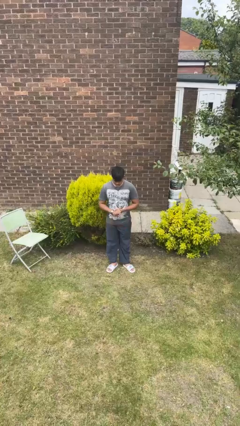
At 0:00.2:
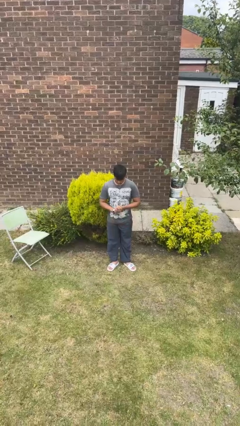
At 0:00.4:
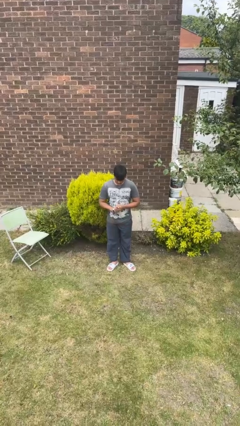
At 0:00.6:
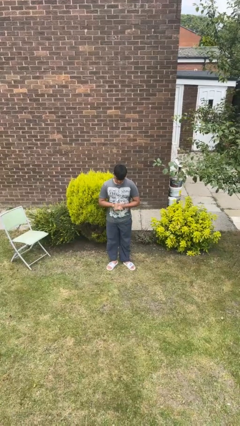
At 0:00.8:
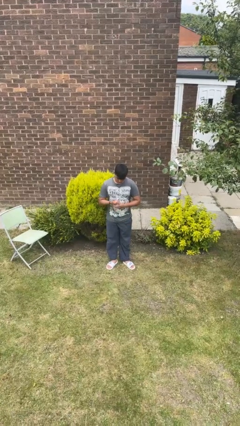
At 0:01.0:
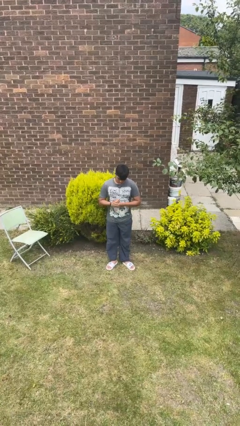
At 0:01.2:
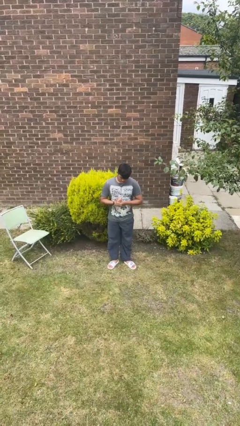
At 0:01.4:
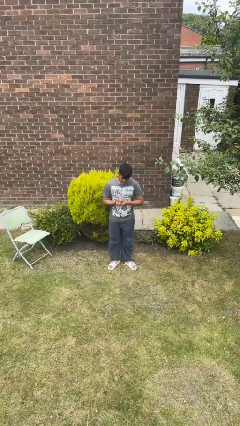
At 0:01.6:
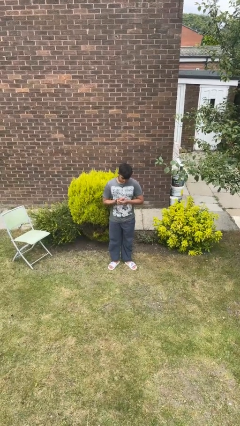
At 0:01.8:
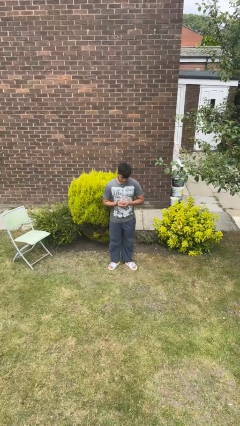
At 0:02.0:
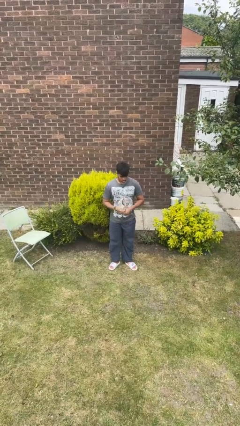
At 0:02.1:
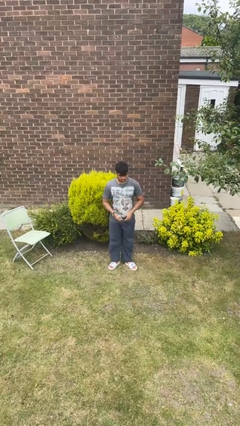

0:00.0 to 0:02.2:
person cracks knuckles

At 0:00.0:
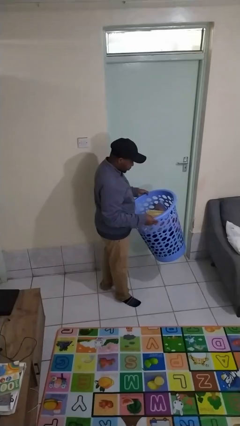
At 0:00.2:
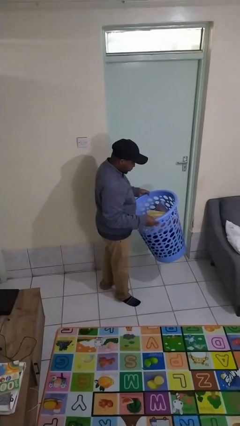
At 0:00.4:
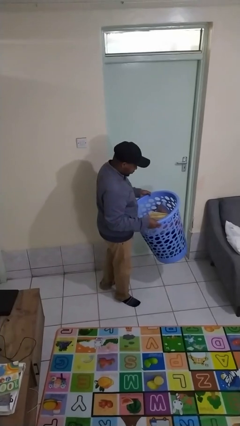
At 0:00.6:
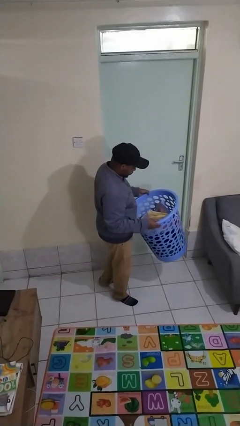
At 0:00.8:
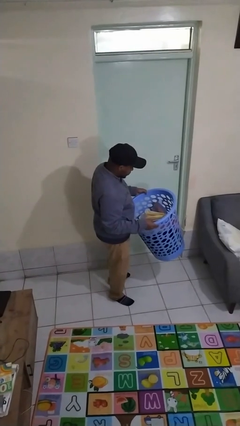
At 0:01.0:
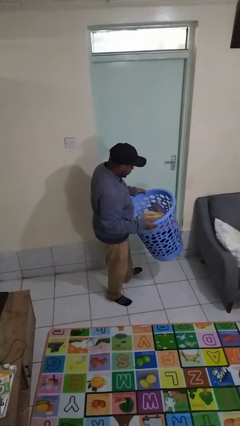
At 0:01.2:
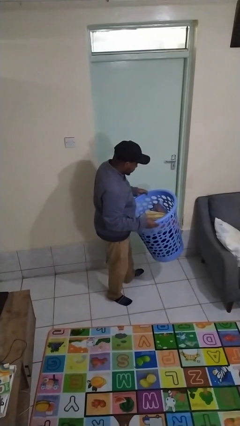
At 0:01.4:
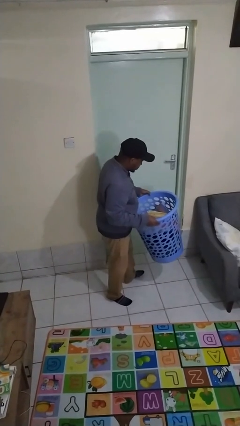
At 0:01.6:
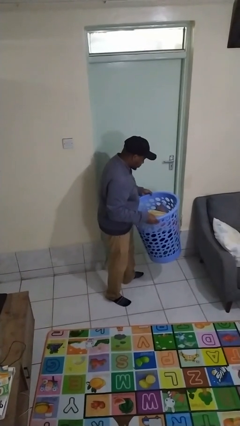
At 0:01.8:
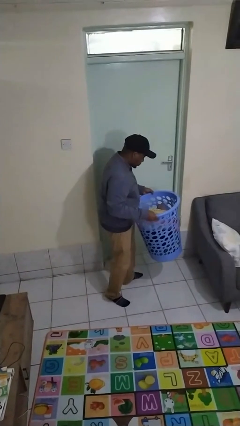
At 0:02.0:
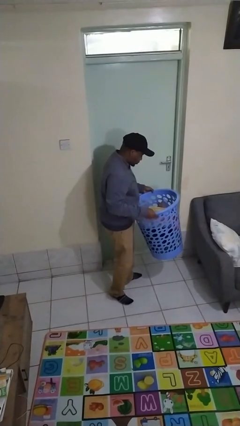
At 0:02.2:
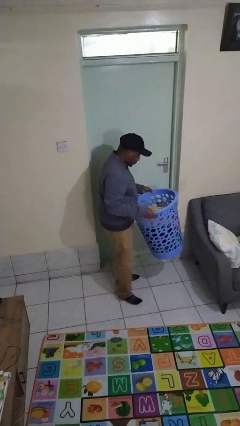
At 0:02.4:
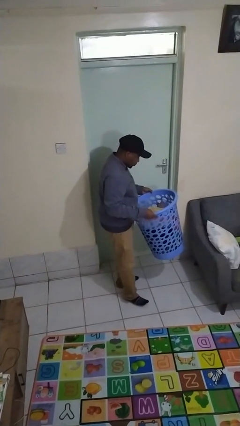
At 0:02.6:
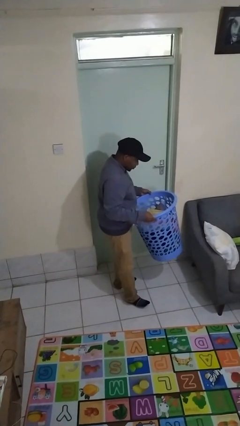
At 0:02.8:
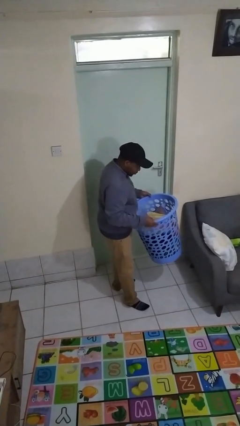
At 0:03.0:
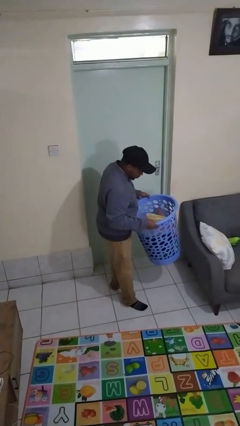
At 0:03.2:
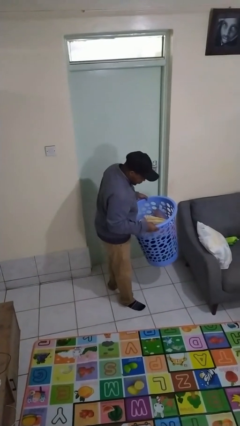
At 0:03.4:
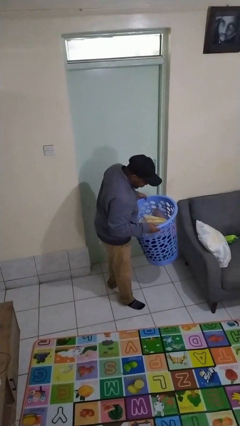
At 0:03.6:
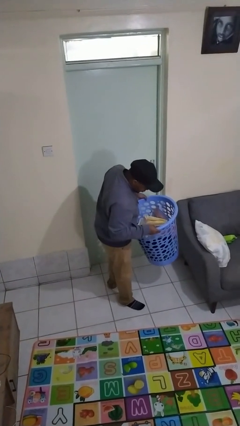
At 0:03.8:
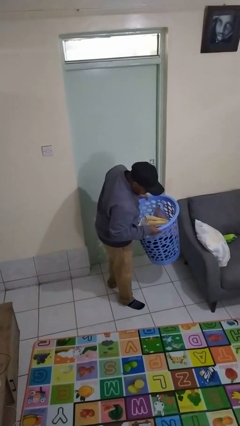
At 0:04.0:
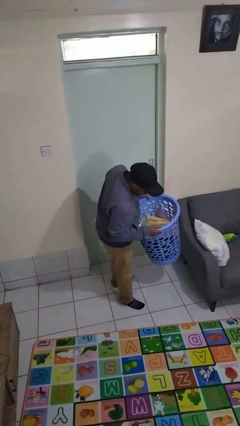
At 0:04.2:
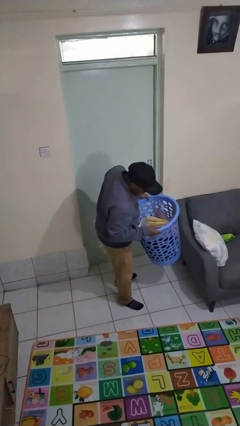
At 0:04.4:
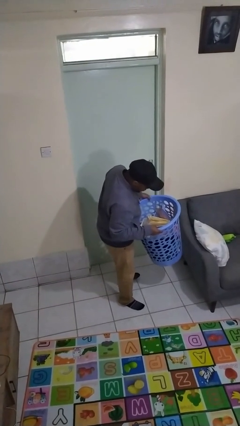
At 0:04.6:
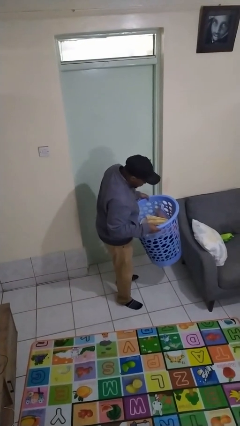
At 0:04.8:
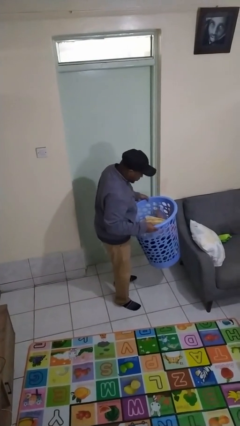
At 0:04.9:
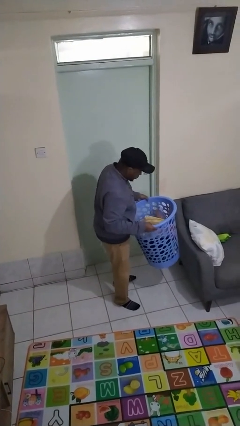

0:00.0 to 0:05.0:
person carries laundry basket

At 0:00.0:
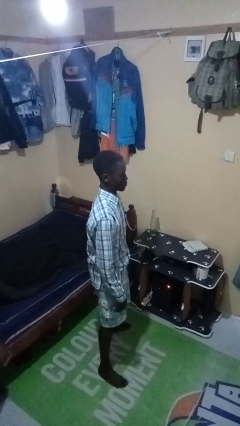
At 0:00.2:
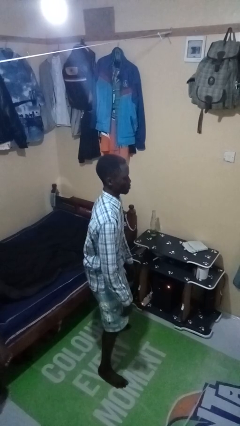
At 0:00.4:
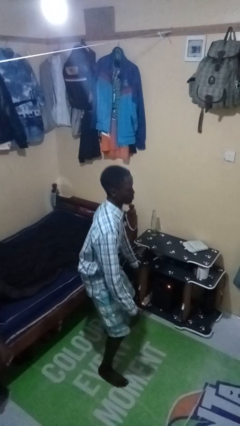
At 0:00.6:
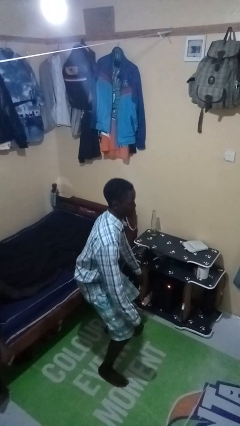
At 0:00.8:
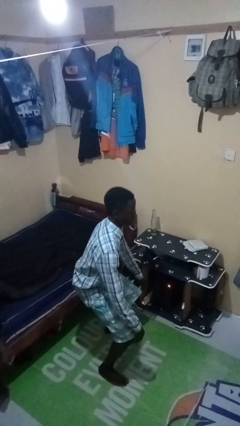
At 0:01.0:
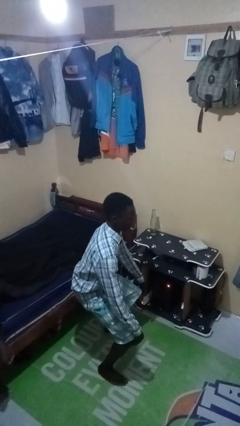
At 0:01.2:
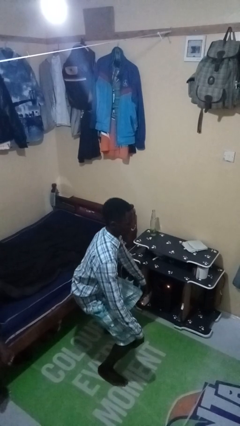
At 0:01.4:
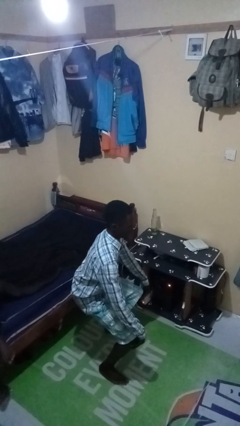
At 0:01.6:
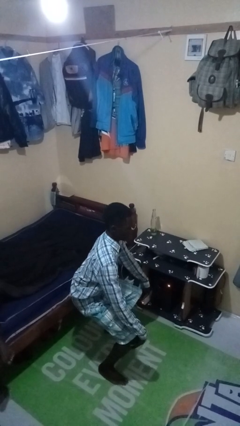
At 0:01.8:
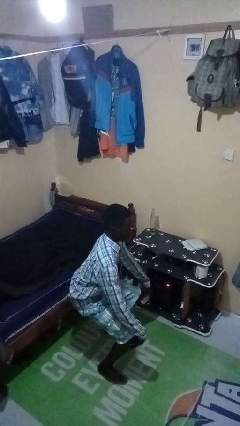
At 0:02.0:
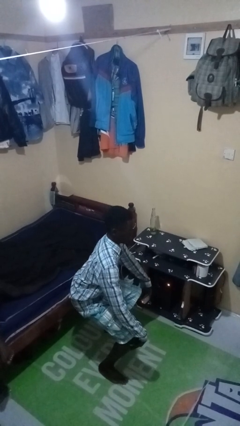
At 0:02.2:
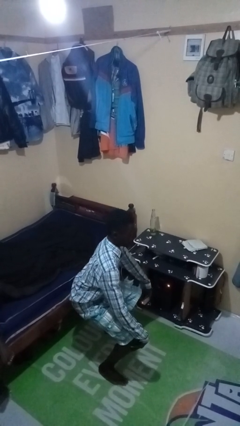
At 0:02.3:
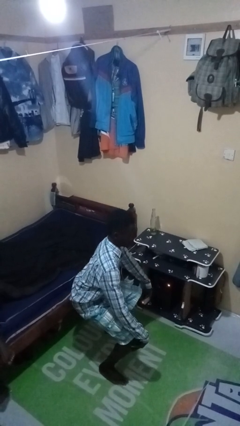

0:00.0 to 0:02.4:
person squats

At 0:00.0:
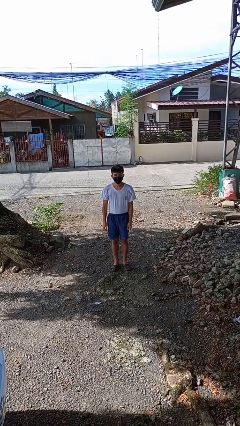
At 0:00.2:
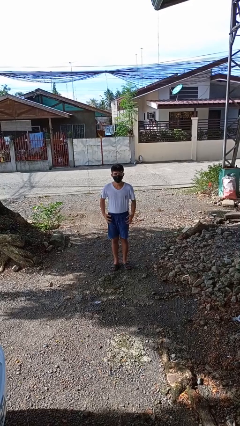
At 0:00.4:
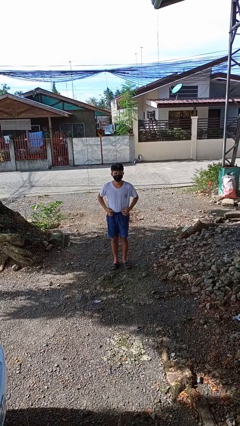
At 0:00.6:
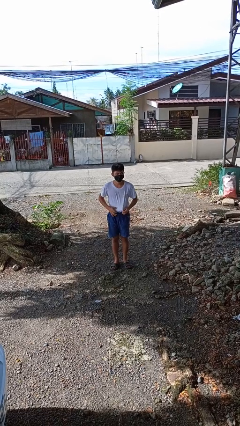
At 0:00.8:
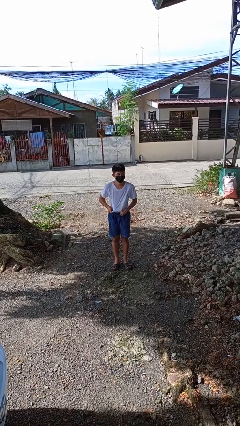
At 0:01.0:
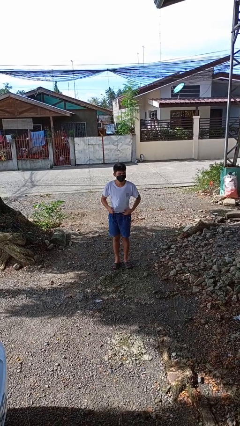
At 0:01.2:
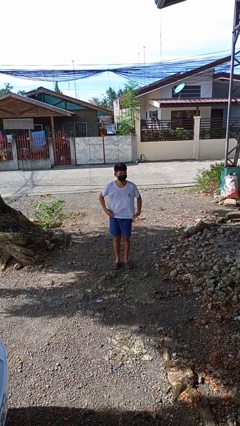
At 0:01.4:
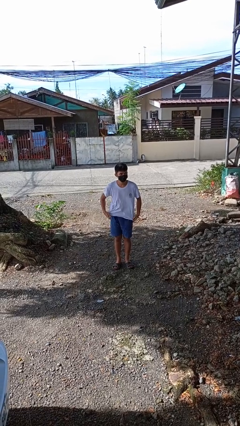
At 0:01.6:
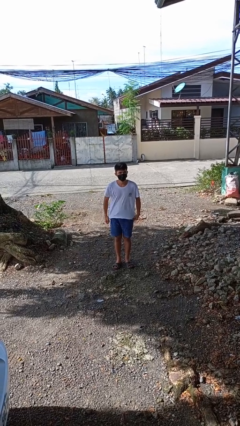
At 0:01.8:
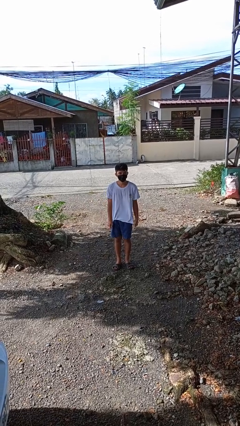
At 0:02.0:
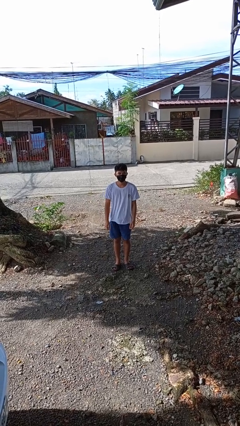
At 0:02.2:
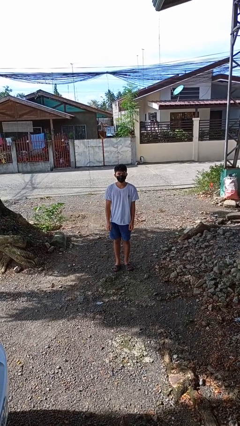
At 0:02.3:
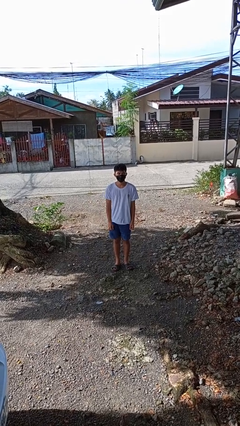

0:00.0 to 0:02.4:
person untucks shirt

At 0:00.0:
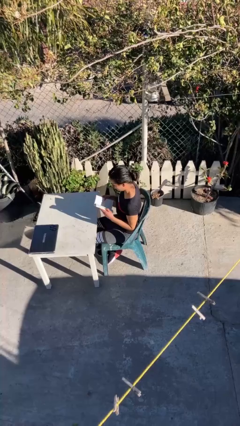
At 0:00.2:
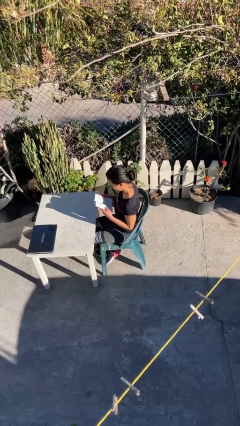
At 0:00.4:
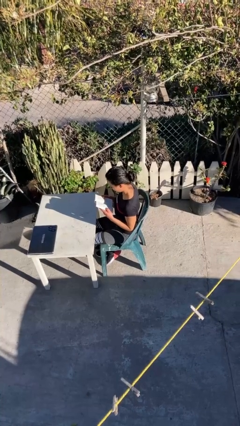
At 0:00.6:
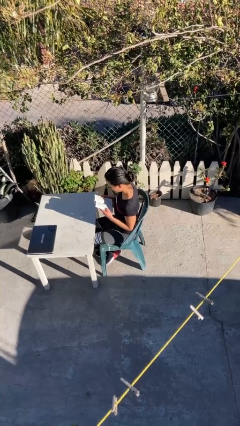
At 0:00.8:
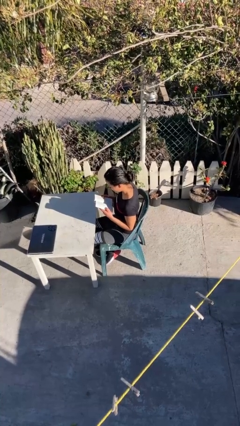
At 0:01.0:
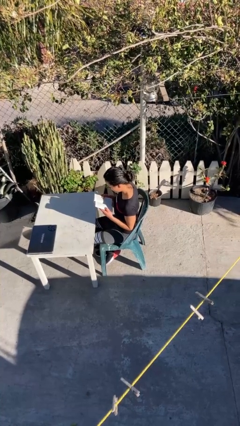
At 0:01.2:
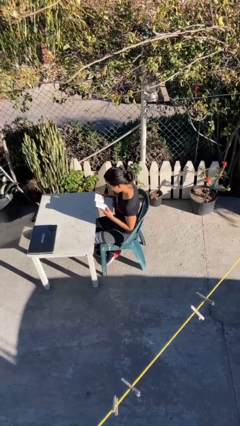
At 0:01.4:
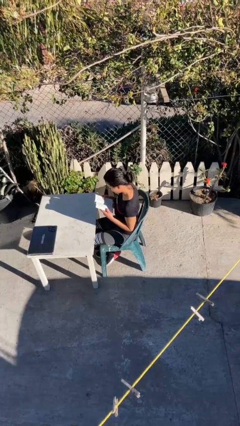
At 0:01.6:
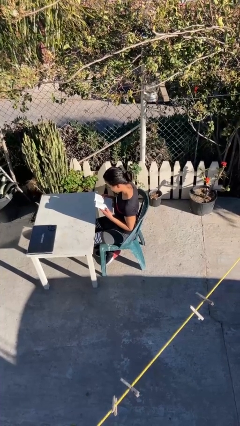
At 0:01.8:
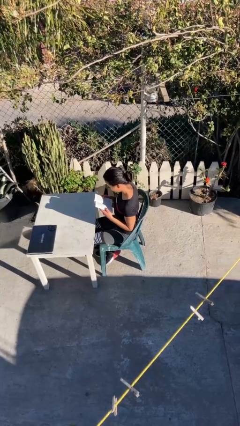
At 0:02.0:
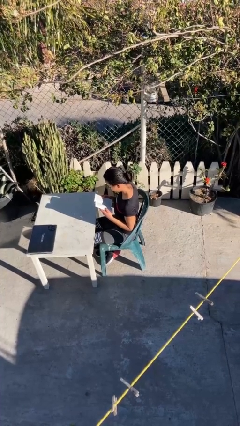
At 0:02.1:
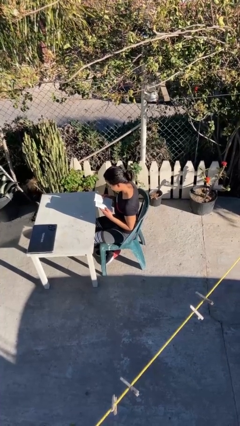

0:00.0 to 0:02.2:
person reads document

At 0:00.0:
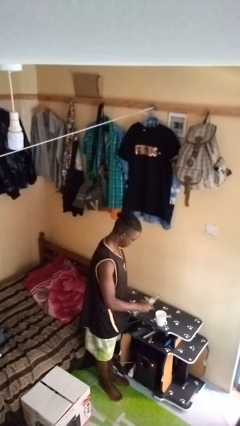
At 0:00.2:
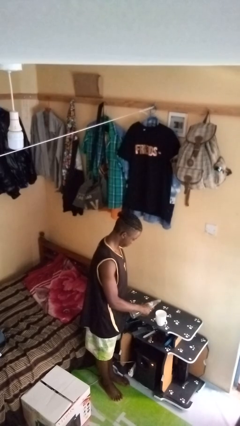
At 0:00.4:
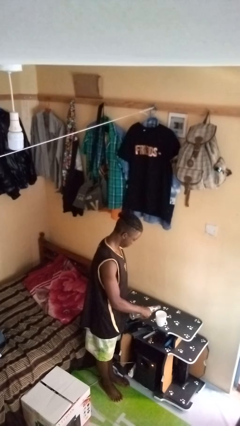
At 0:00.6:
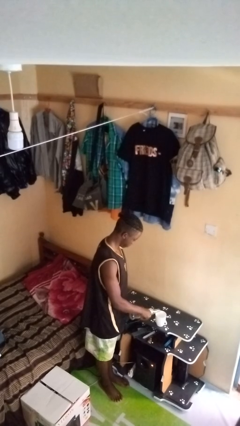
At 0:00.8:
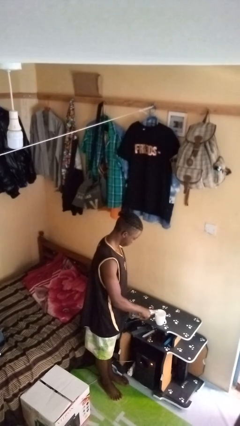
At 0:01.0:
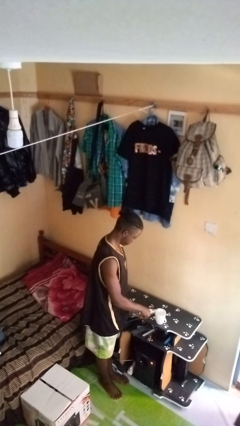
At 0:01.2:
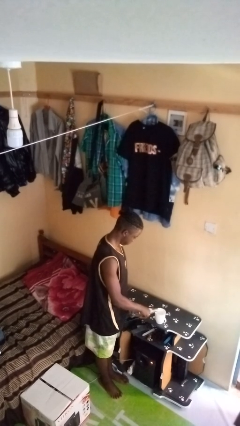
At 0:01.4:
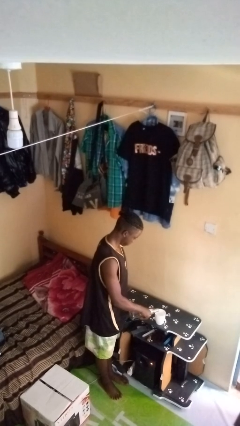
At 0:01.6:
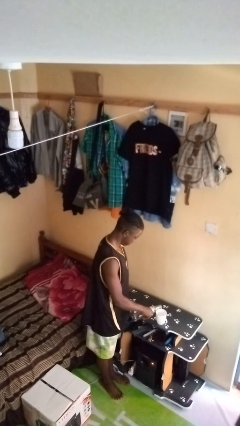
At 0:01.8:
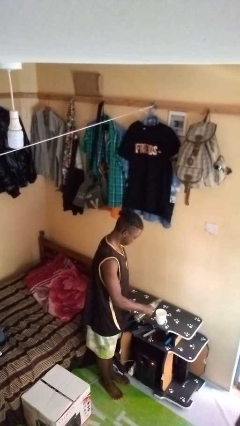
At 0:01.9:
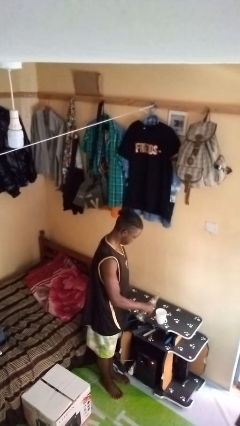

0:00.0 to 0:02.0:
person pours liquid into cup

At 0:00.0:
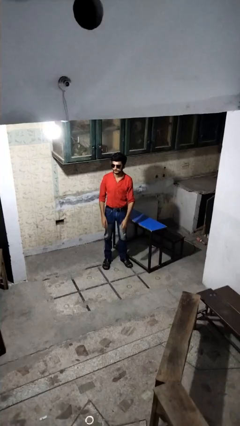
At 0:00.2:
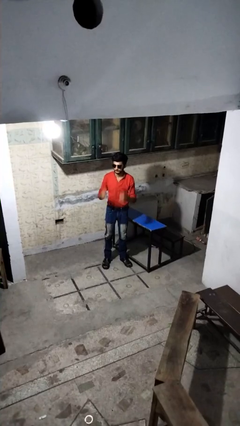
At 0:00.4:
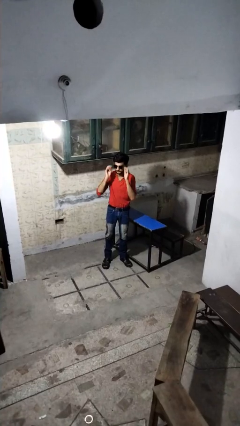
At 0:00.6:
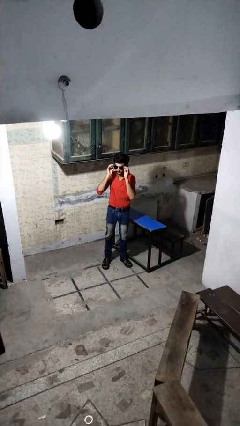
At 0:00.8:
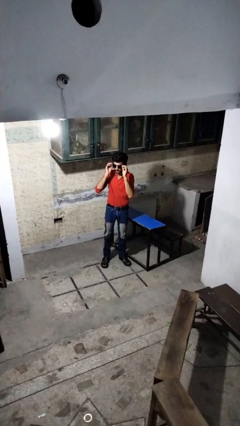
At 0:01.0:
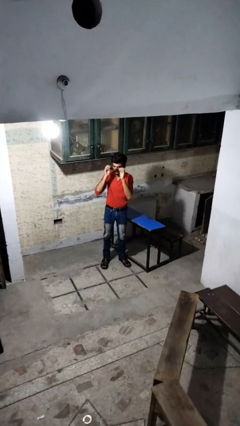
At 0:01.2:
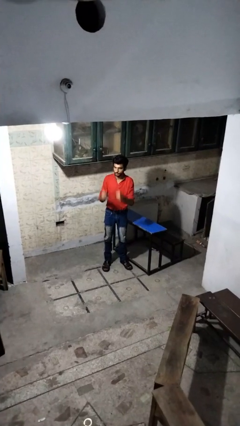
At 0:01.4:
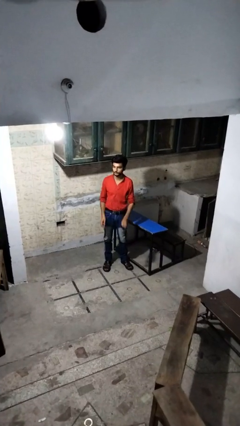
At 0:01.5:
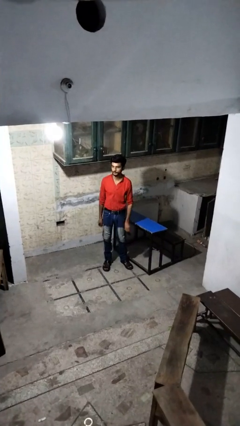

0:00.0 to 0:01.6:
person takes off sunglasses
